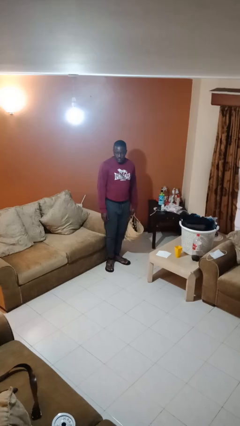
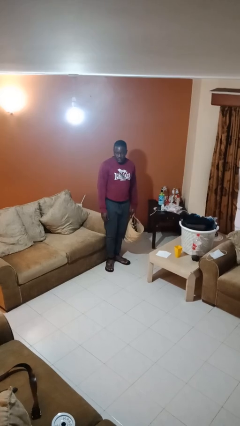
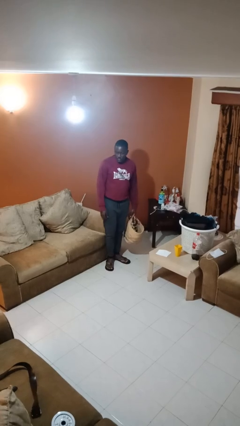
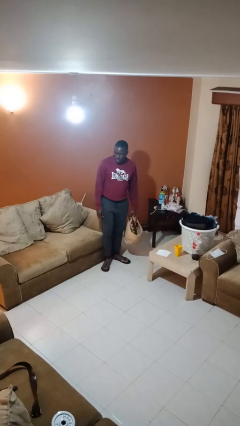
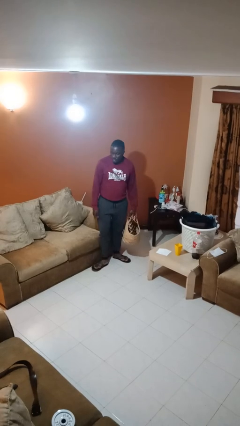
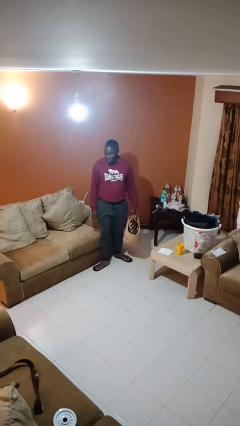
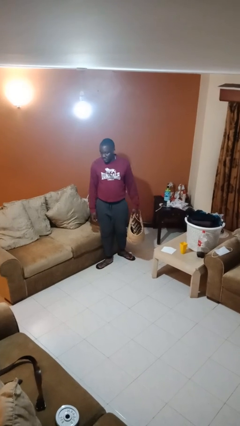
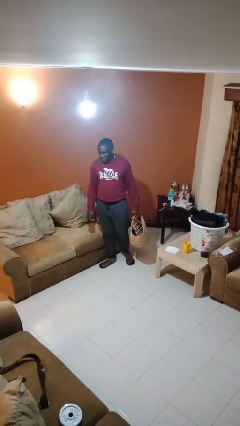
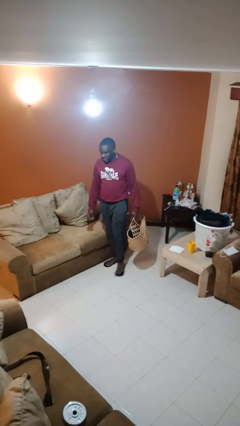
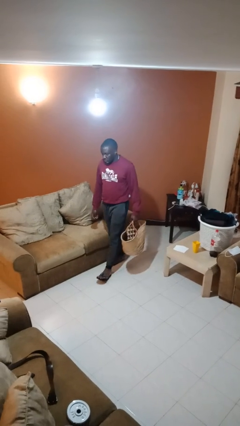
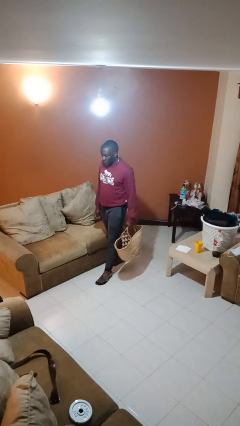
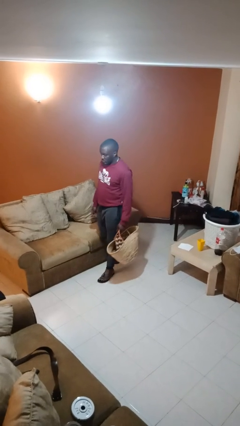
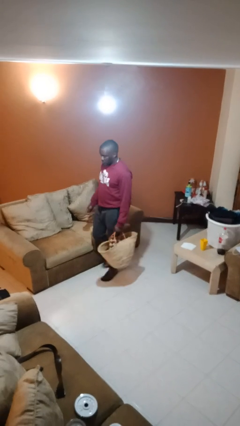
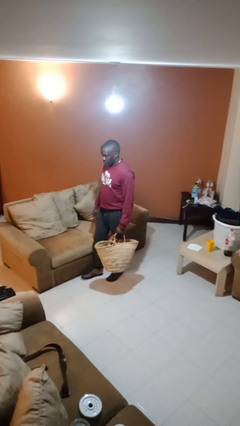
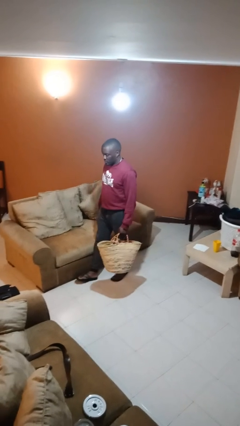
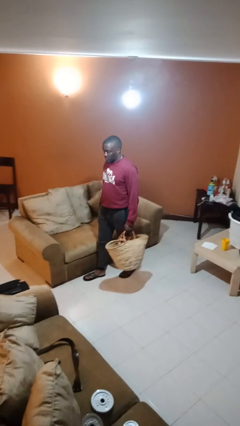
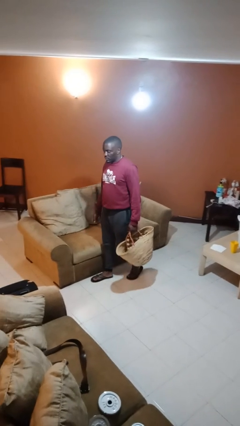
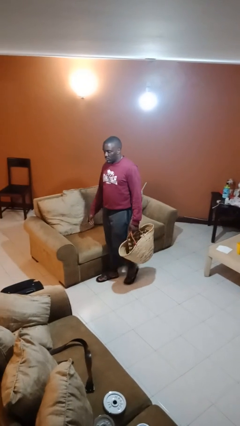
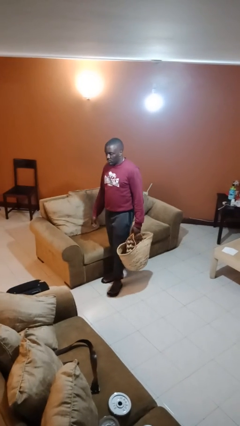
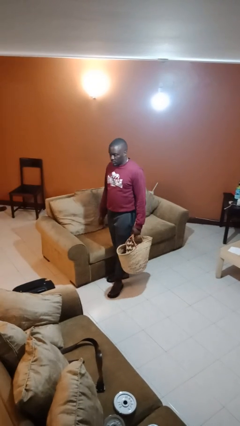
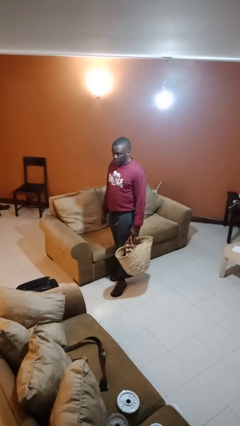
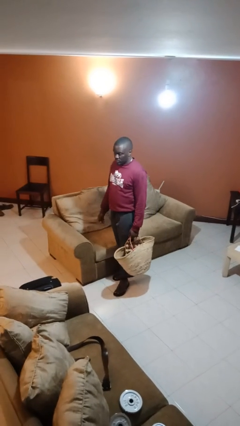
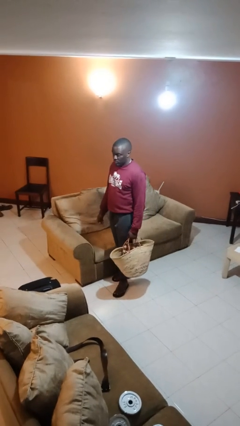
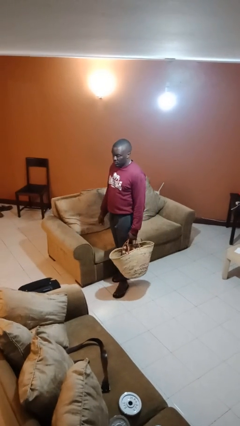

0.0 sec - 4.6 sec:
person carries groceries

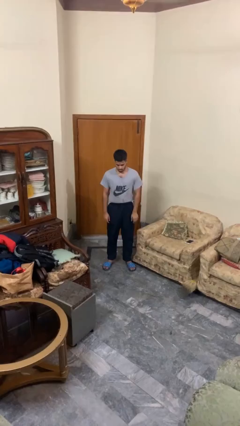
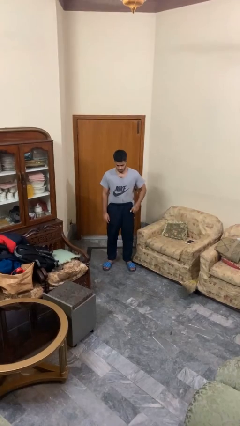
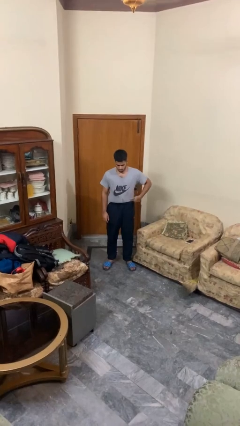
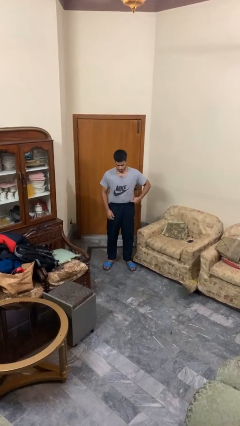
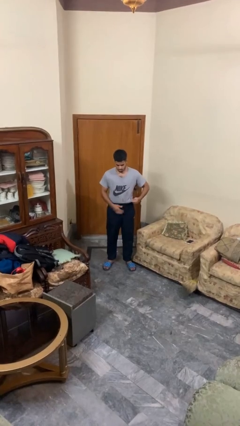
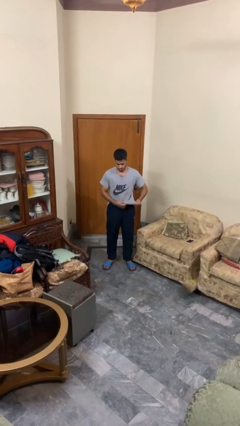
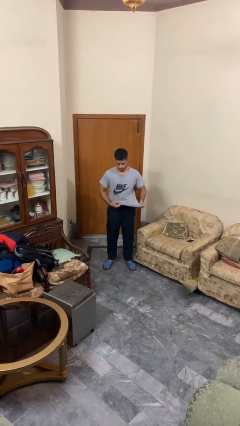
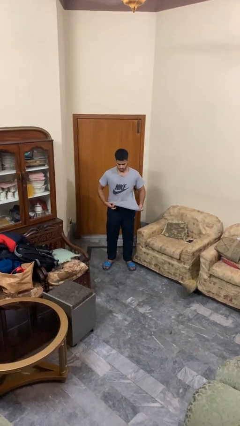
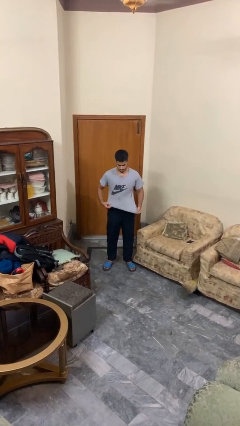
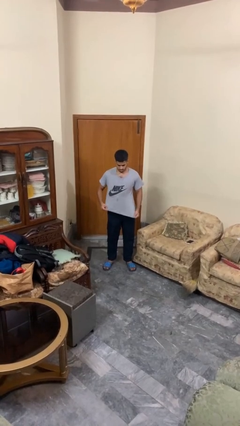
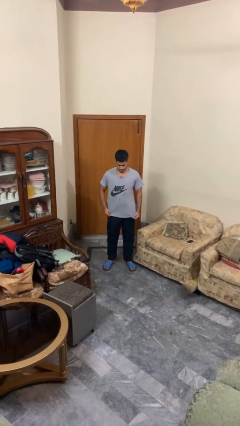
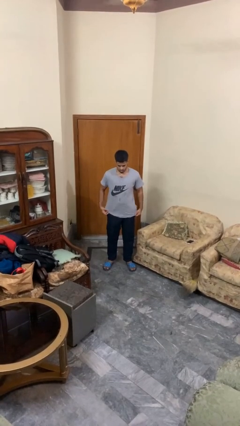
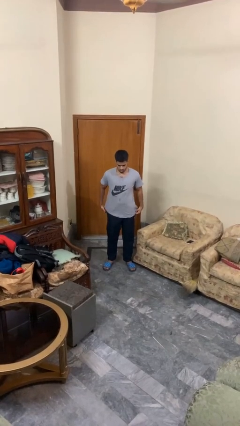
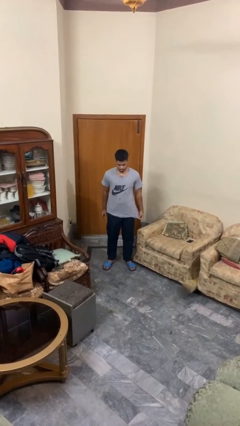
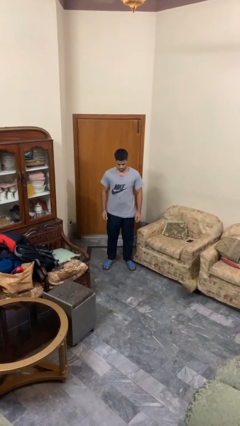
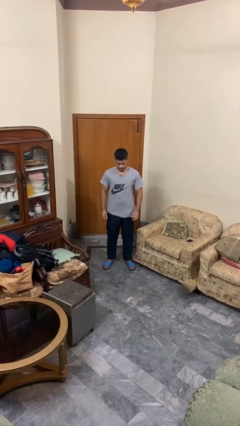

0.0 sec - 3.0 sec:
person untucks shirt

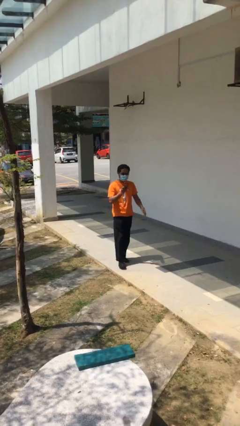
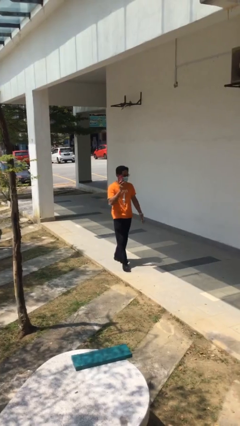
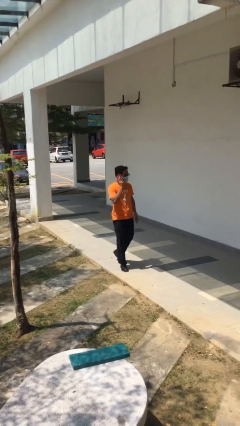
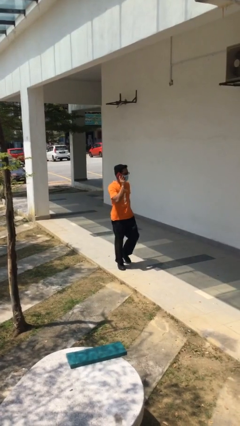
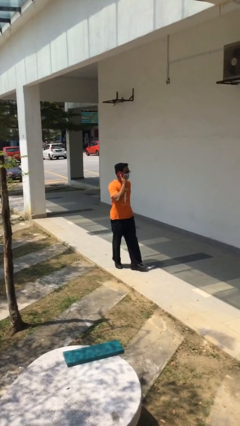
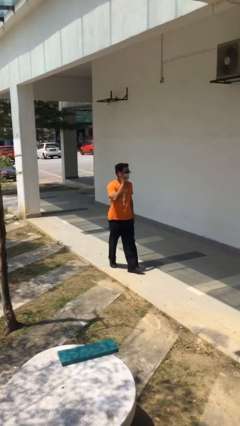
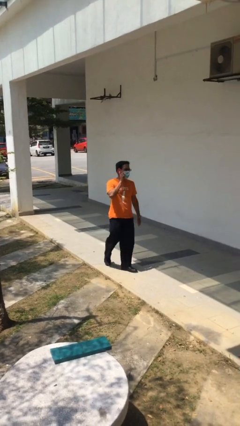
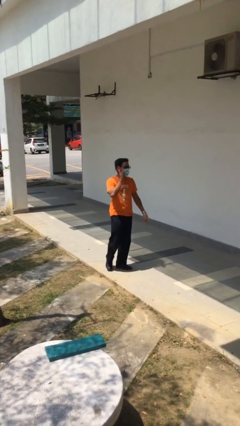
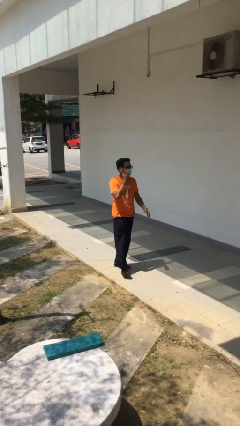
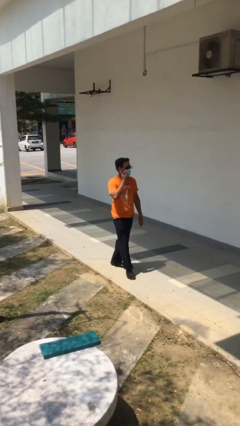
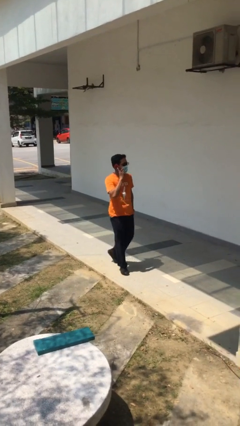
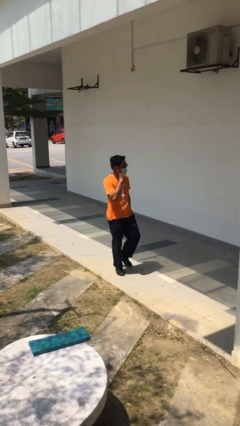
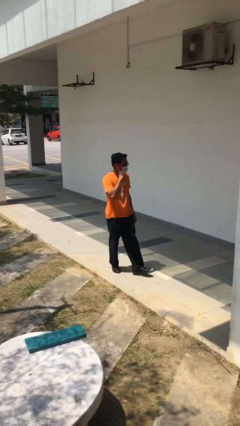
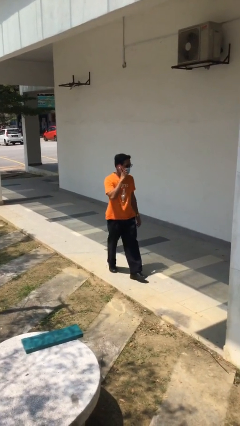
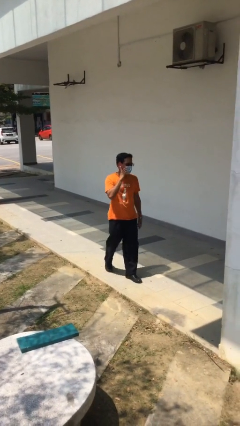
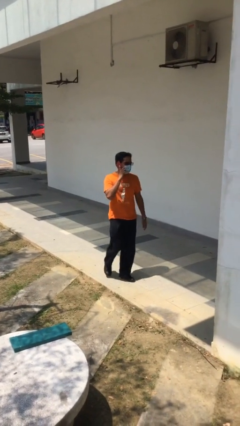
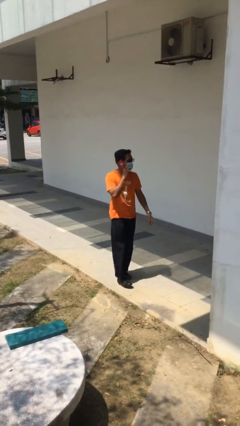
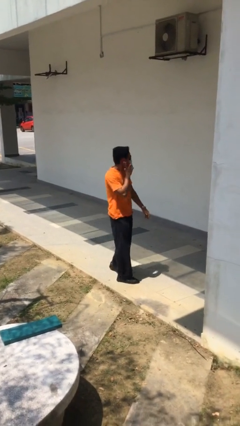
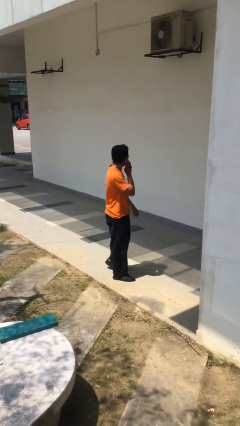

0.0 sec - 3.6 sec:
person talks on phone

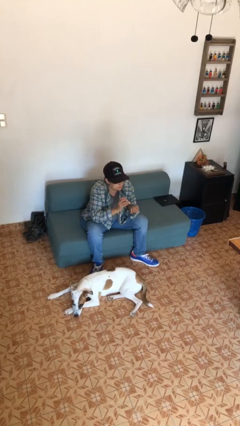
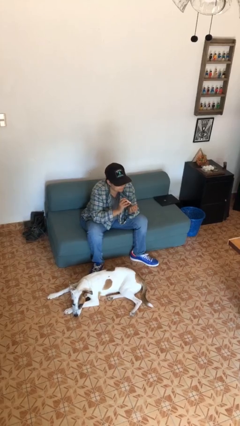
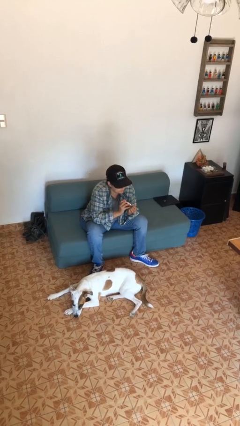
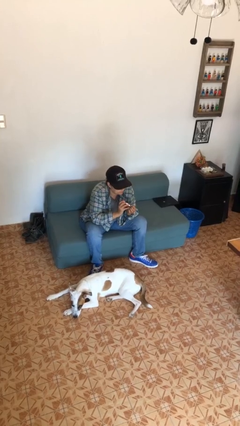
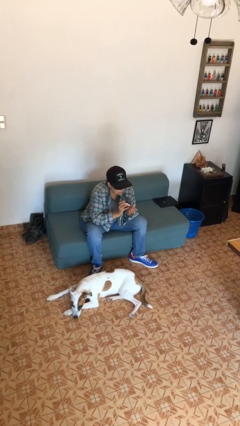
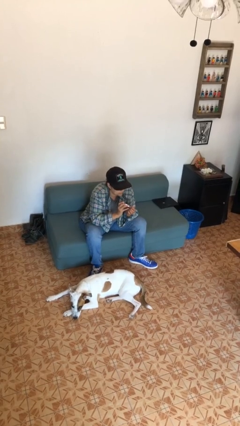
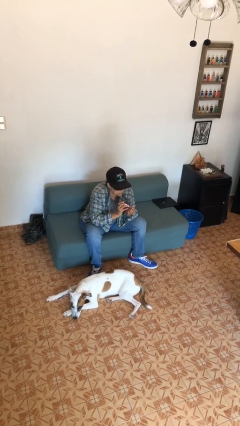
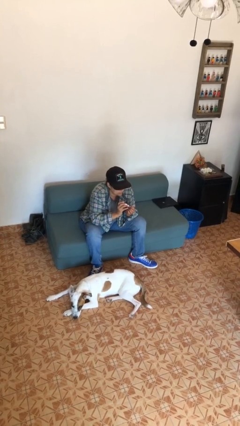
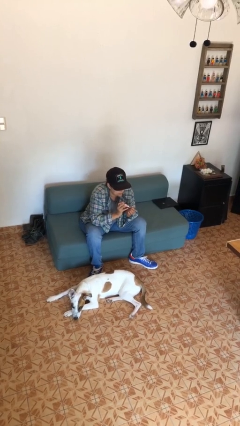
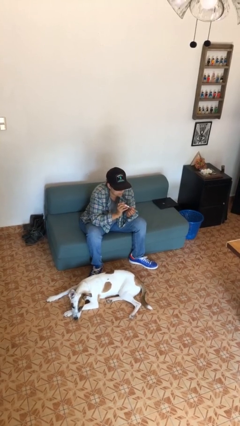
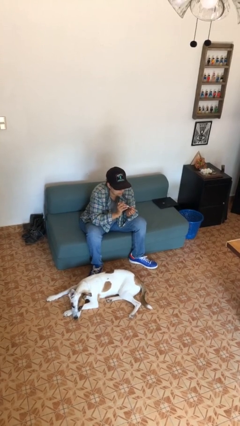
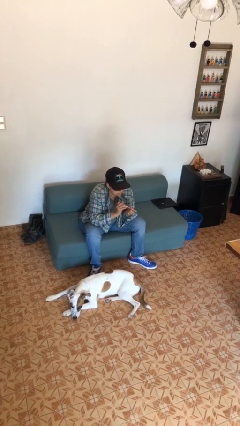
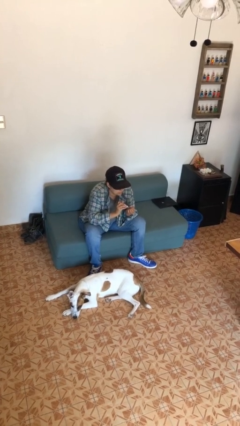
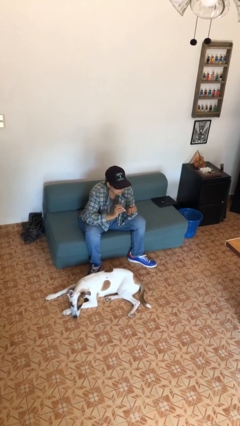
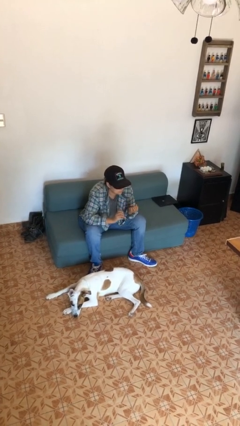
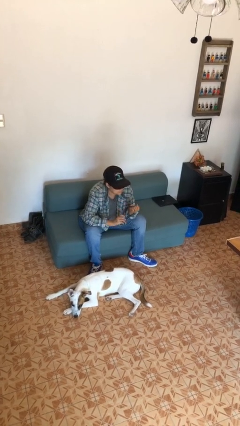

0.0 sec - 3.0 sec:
person clips fingernails

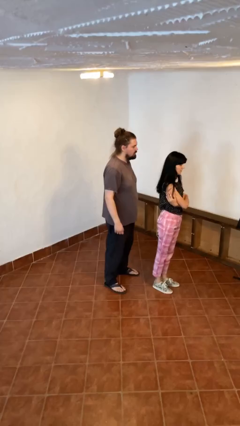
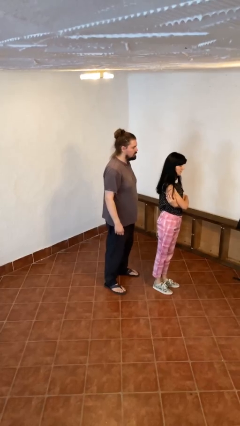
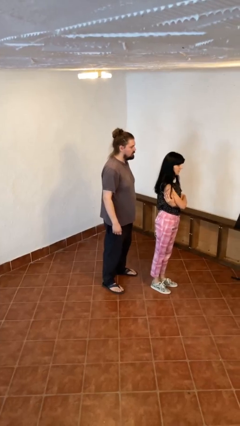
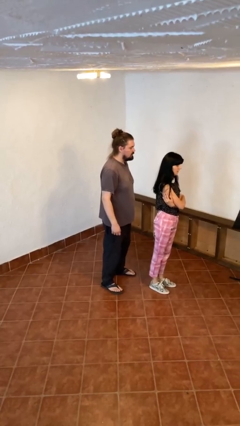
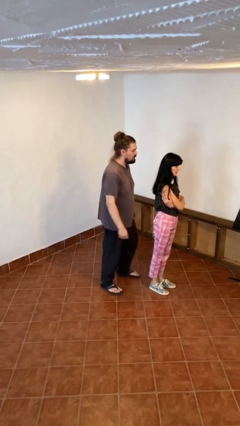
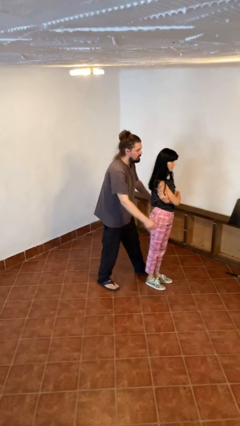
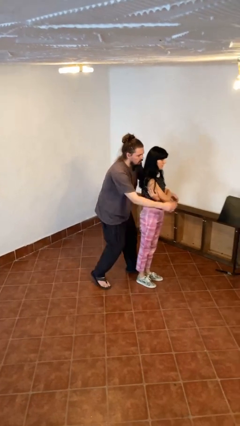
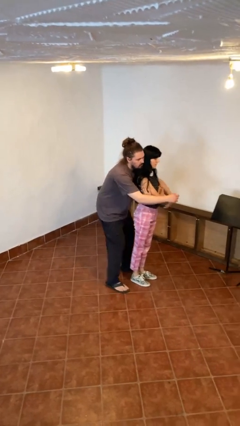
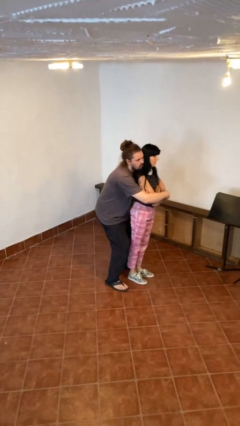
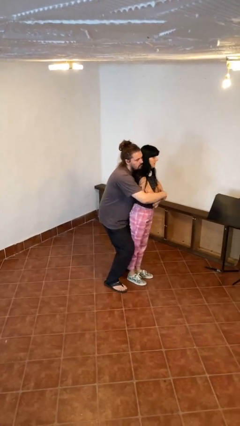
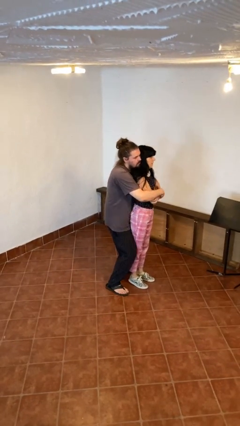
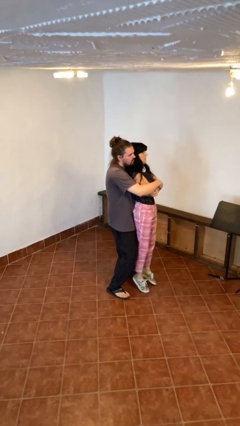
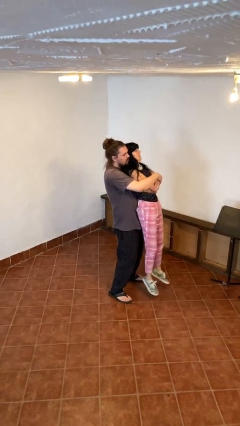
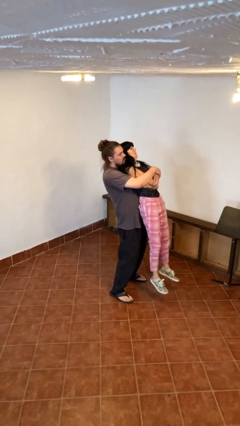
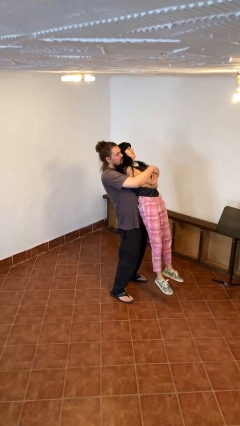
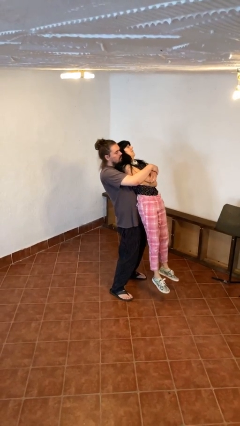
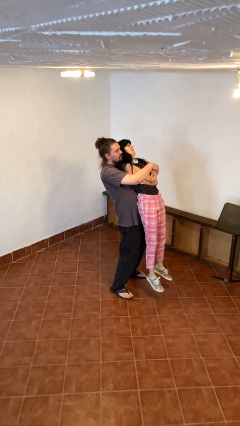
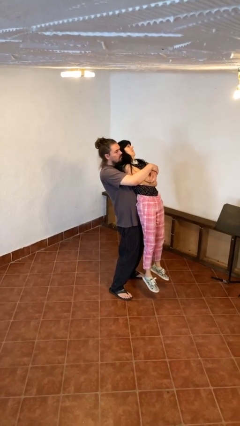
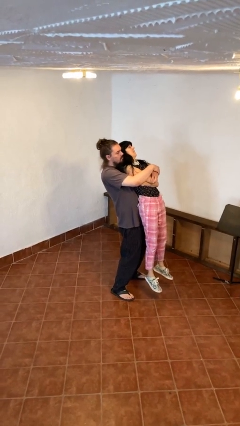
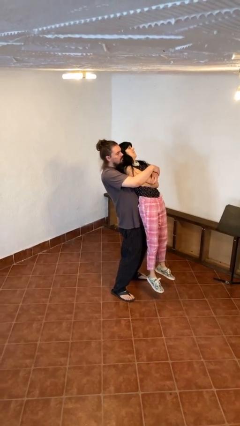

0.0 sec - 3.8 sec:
person picks up person
